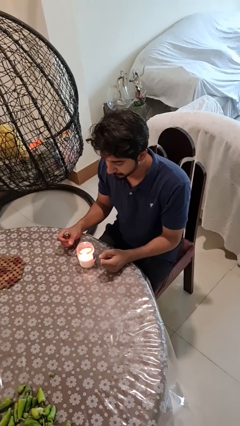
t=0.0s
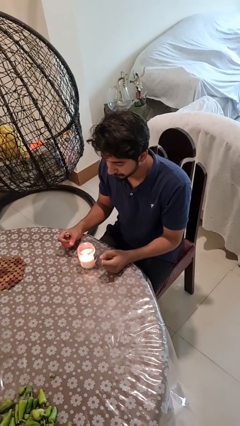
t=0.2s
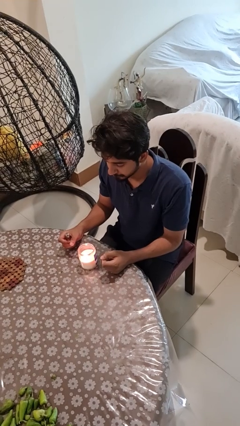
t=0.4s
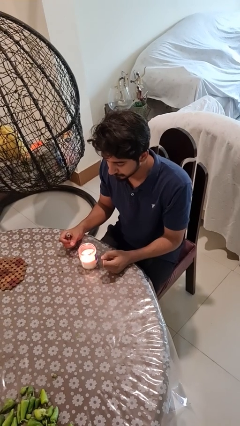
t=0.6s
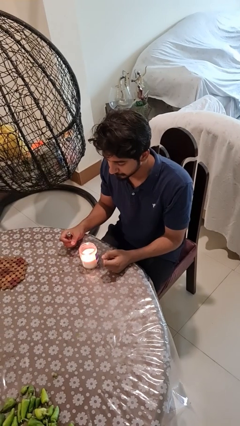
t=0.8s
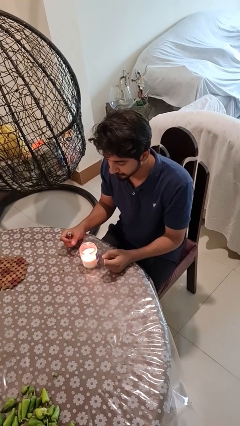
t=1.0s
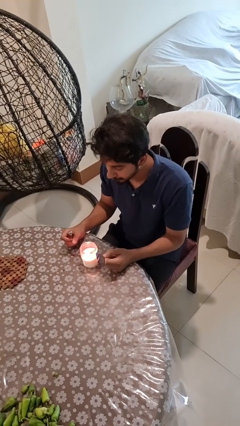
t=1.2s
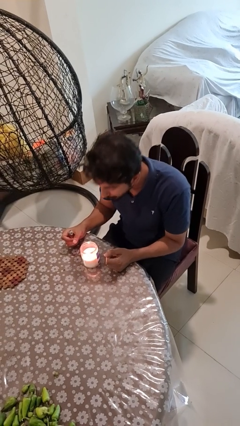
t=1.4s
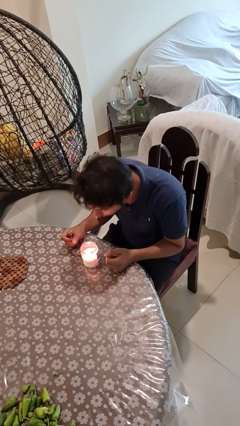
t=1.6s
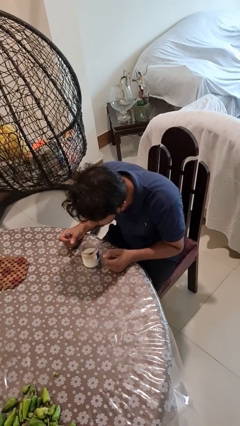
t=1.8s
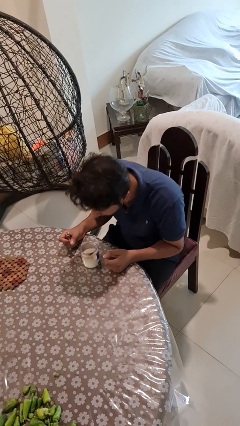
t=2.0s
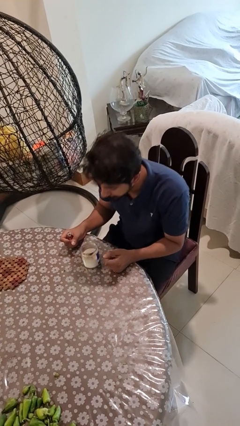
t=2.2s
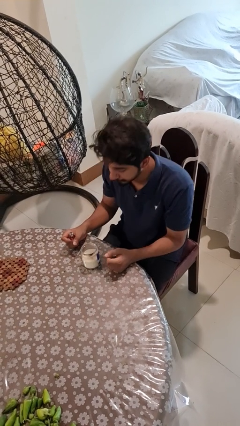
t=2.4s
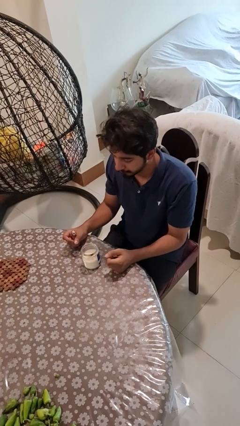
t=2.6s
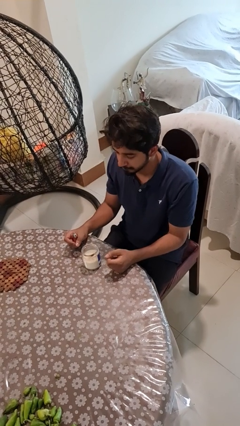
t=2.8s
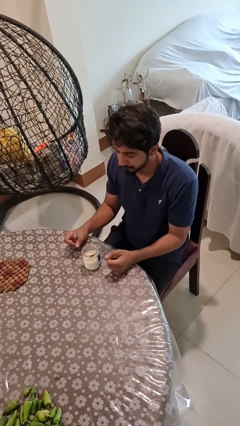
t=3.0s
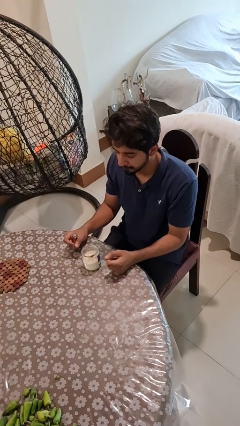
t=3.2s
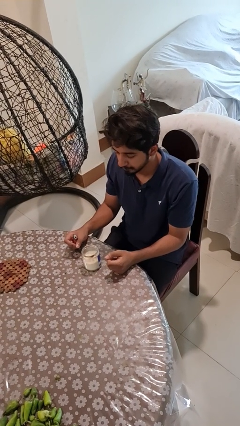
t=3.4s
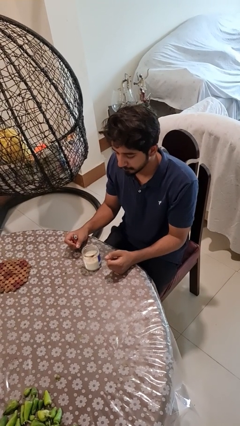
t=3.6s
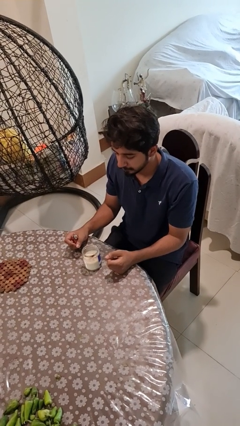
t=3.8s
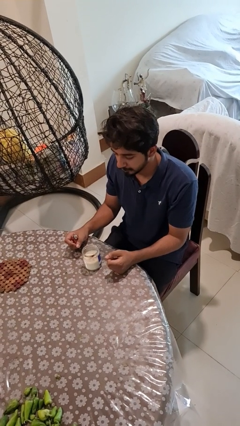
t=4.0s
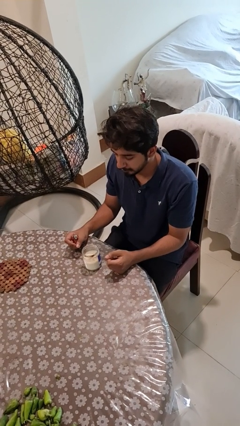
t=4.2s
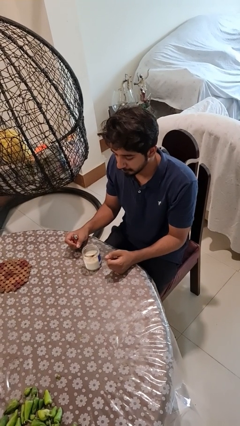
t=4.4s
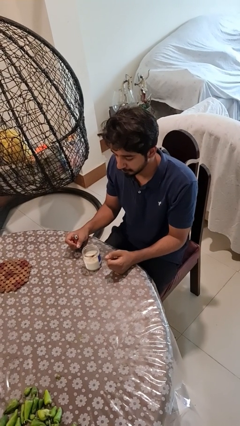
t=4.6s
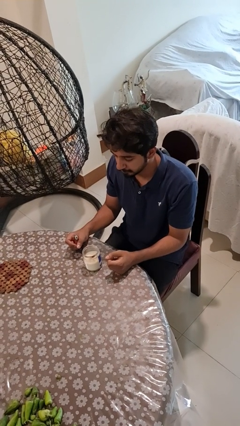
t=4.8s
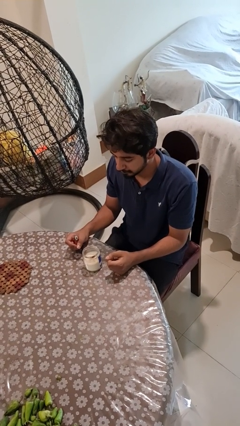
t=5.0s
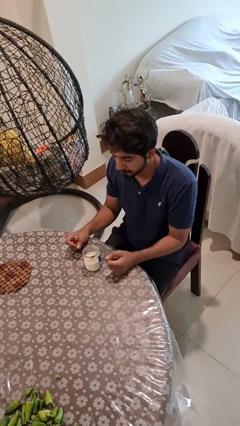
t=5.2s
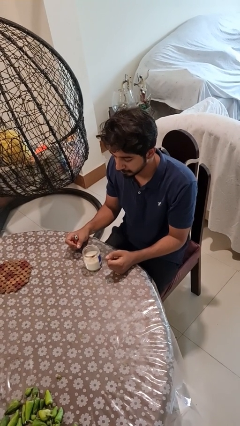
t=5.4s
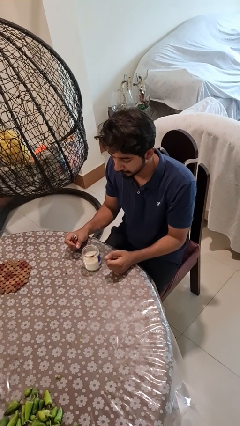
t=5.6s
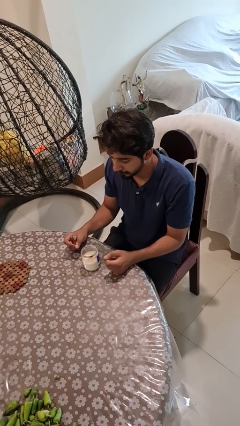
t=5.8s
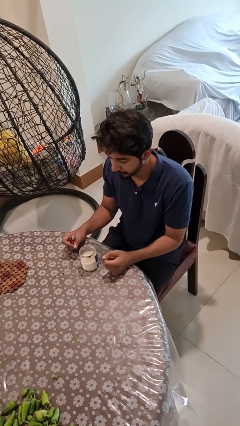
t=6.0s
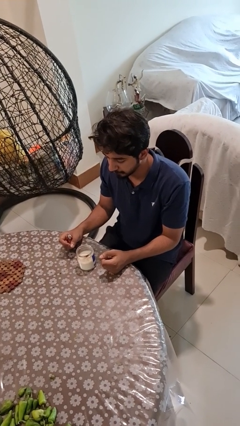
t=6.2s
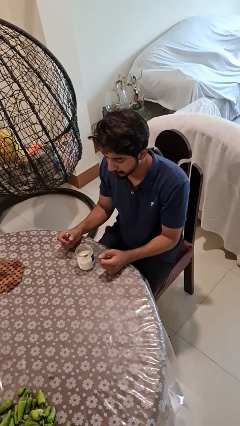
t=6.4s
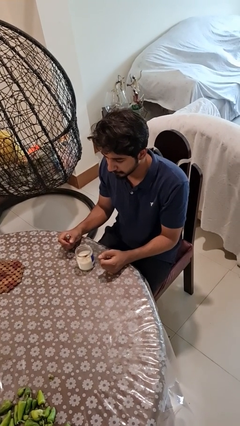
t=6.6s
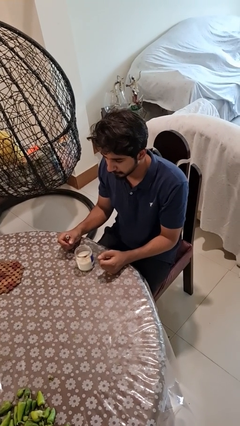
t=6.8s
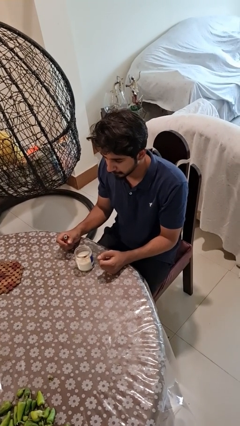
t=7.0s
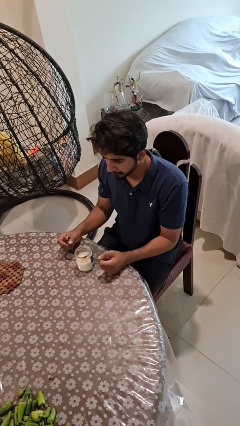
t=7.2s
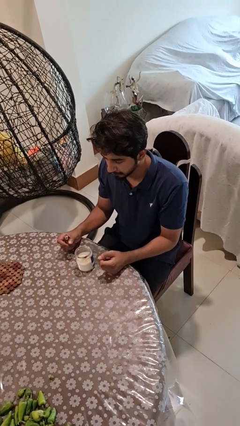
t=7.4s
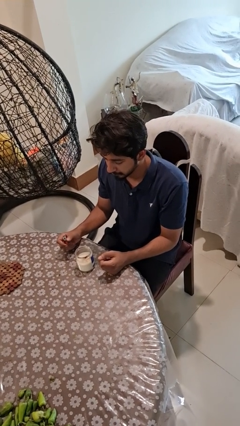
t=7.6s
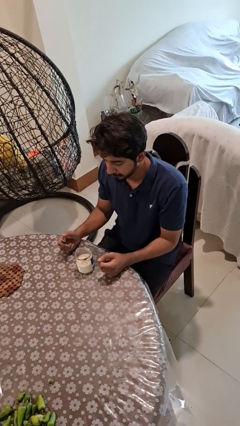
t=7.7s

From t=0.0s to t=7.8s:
person extinguishes candle

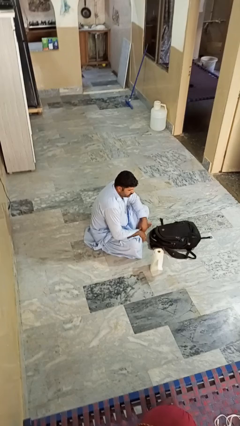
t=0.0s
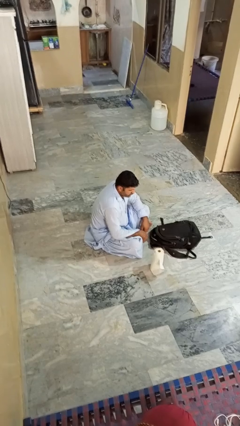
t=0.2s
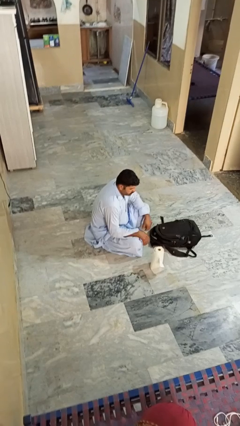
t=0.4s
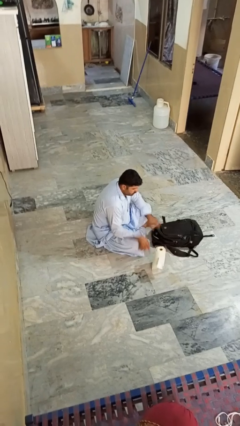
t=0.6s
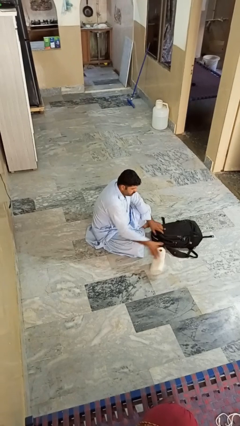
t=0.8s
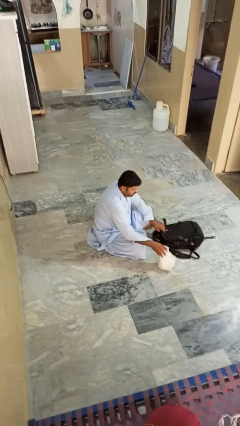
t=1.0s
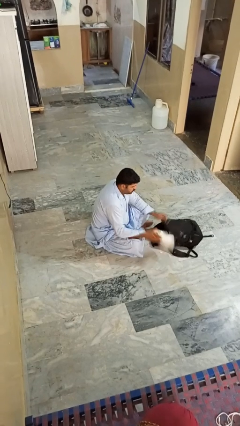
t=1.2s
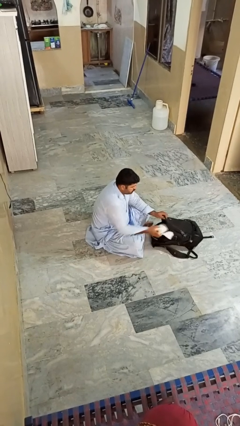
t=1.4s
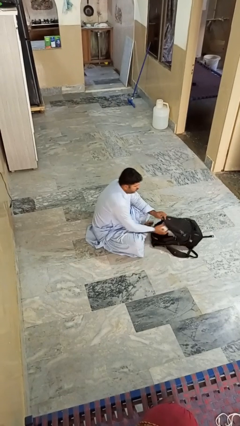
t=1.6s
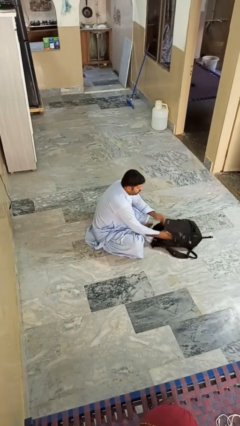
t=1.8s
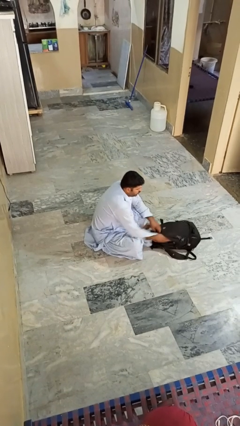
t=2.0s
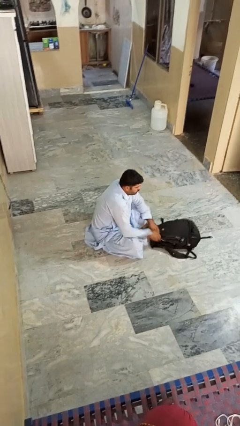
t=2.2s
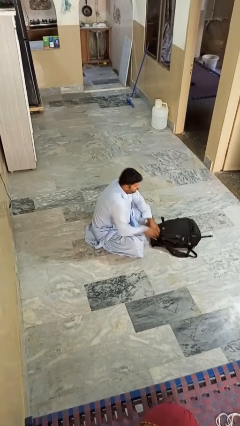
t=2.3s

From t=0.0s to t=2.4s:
person puts object into bag

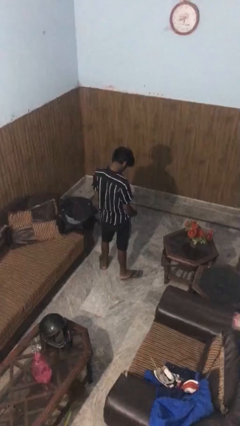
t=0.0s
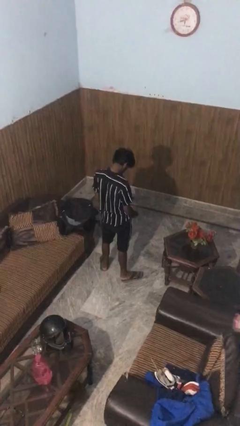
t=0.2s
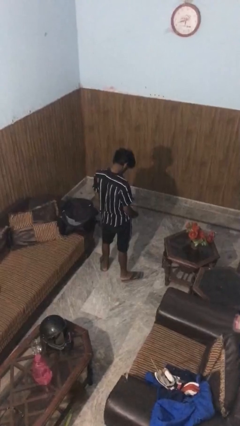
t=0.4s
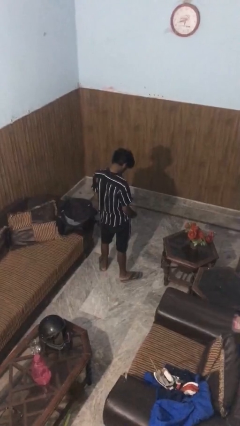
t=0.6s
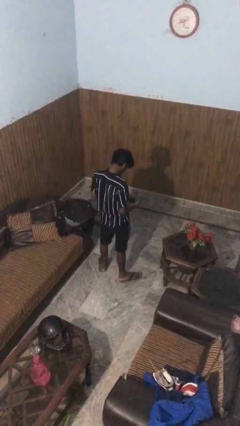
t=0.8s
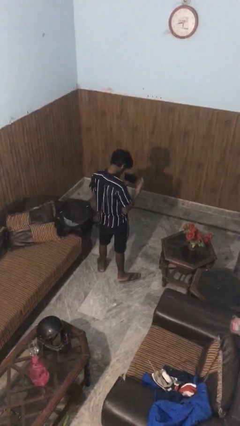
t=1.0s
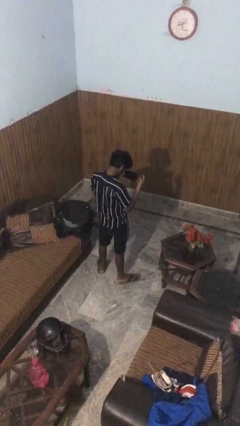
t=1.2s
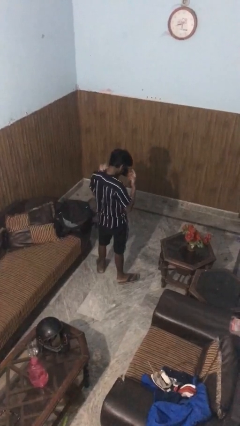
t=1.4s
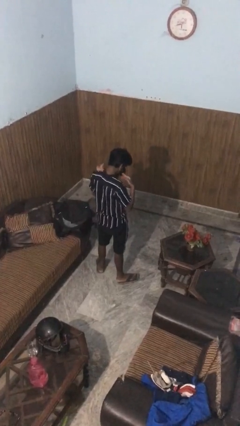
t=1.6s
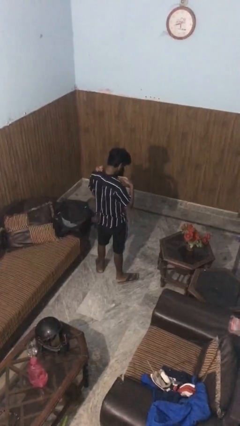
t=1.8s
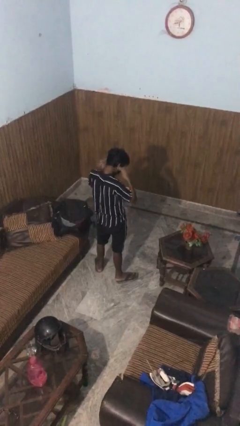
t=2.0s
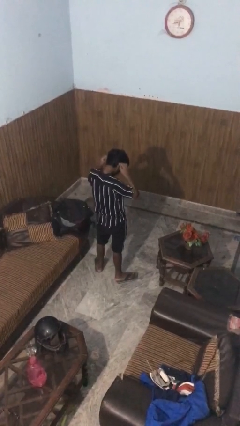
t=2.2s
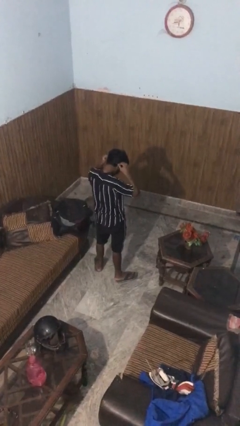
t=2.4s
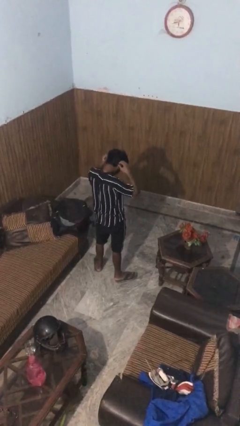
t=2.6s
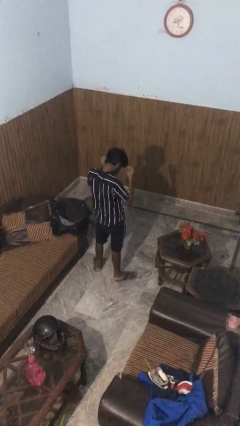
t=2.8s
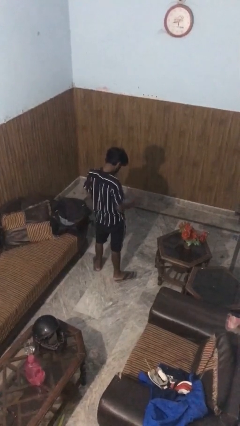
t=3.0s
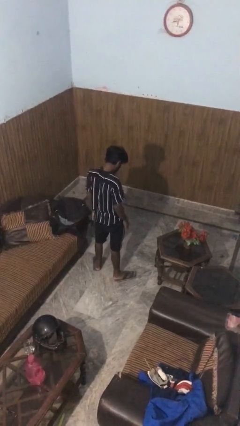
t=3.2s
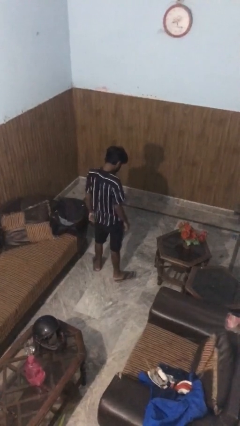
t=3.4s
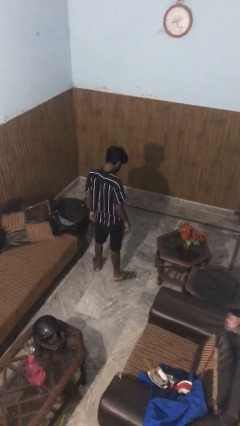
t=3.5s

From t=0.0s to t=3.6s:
person puts on facemask

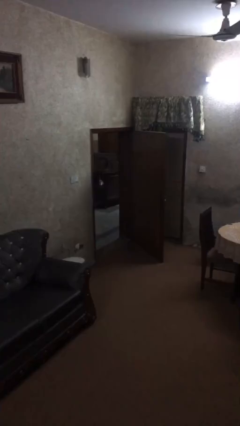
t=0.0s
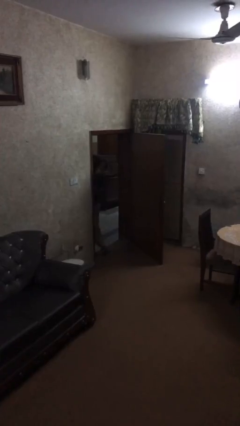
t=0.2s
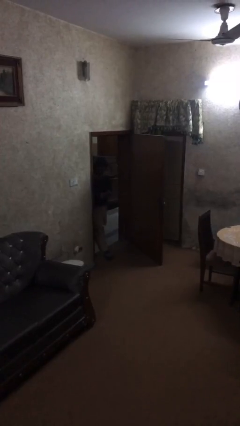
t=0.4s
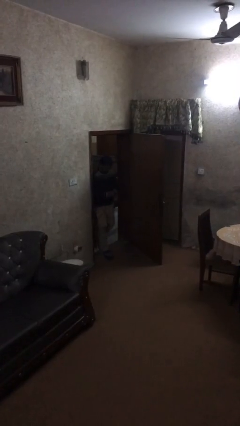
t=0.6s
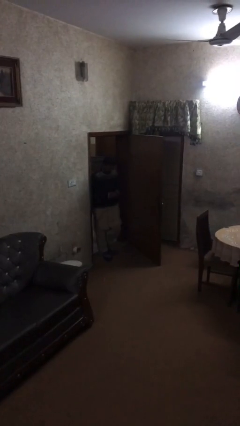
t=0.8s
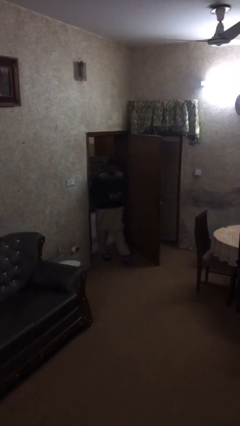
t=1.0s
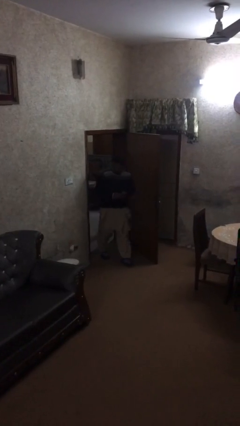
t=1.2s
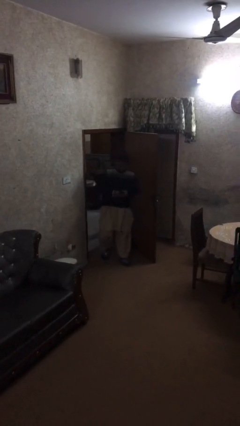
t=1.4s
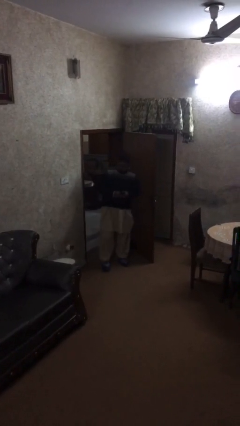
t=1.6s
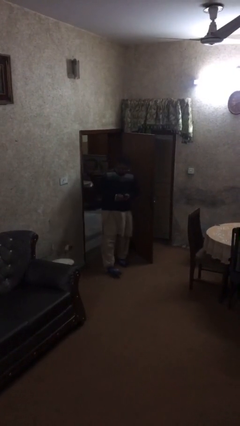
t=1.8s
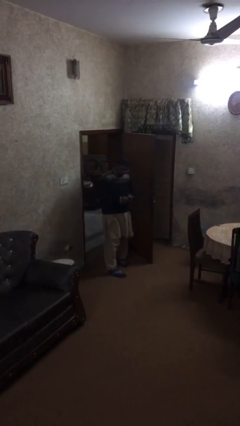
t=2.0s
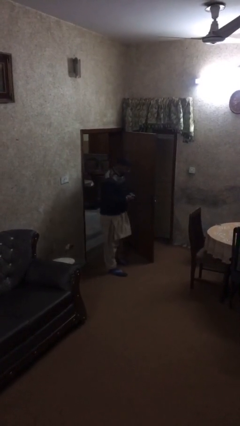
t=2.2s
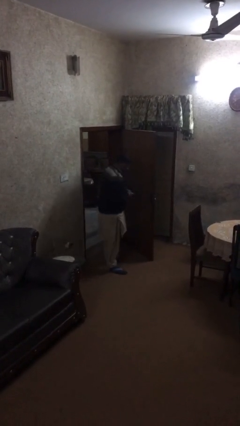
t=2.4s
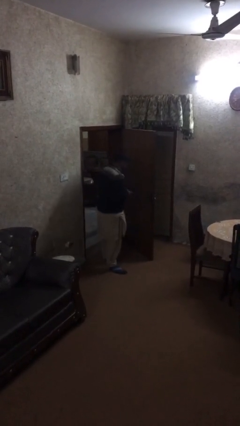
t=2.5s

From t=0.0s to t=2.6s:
person enters scene through structure

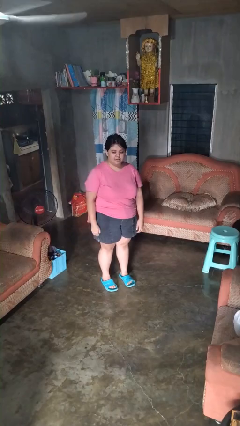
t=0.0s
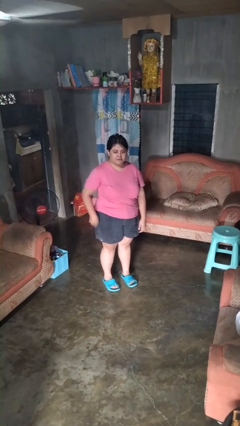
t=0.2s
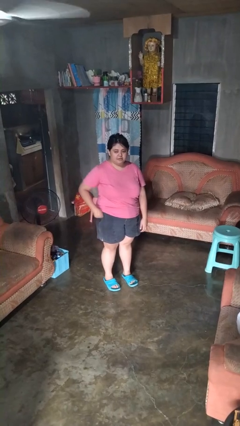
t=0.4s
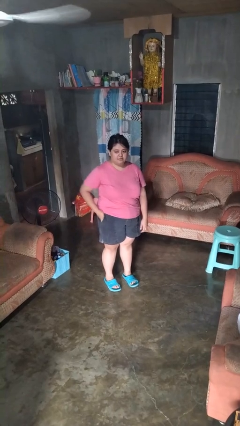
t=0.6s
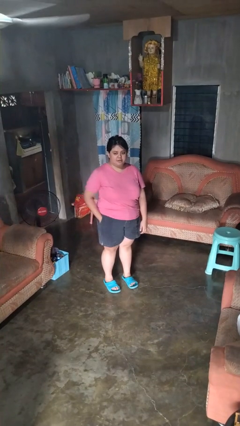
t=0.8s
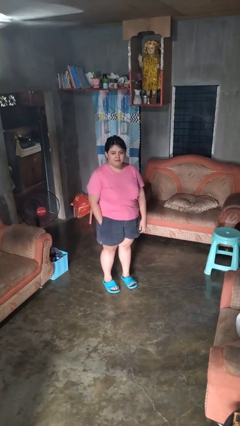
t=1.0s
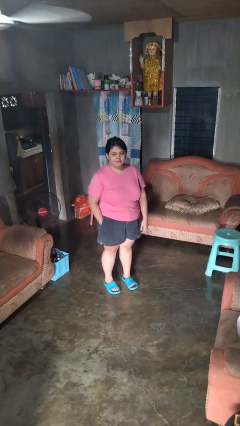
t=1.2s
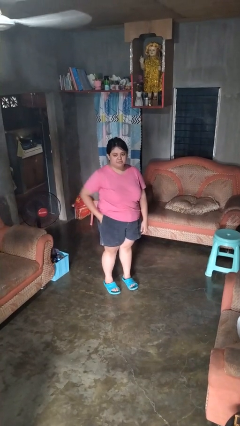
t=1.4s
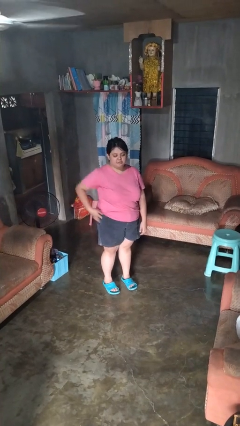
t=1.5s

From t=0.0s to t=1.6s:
person takes phone from pocket
